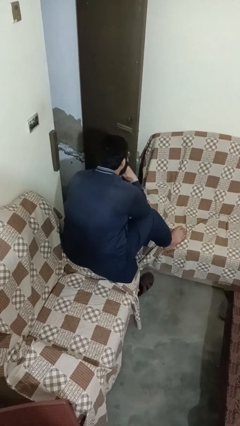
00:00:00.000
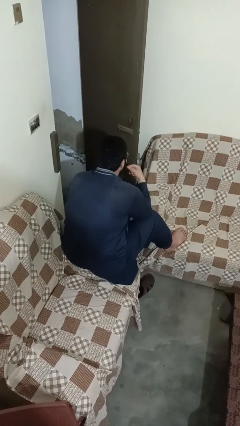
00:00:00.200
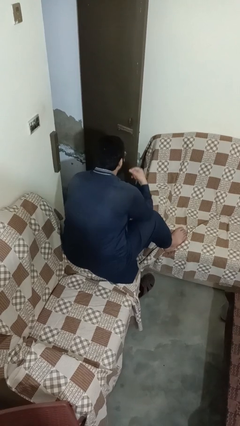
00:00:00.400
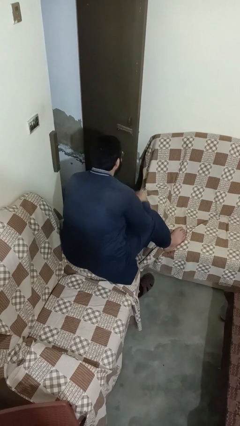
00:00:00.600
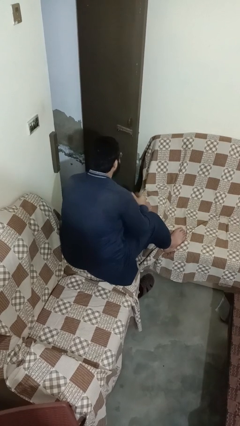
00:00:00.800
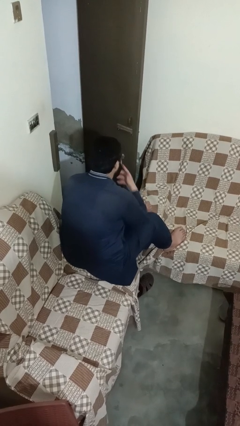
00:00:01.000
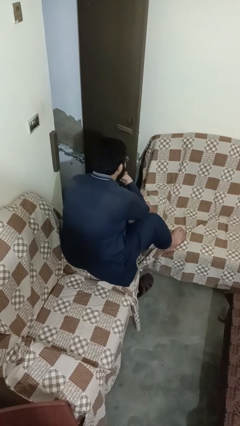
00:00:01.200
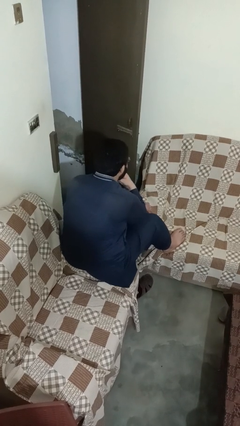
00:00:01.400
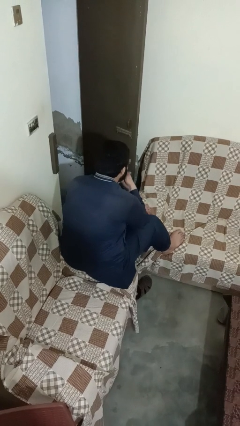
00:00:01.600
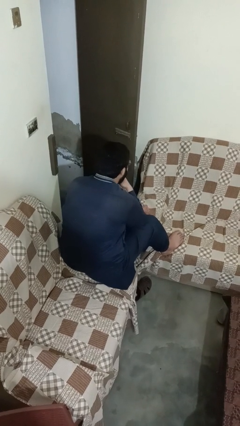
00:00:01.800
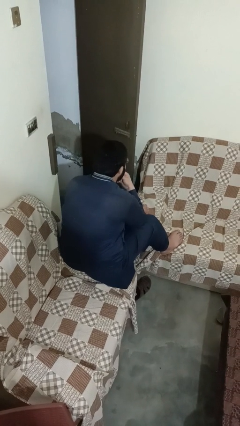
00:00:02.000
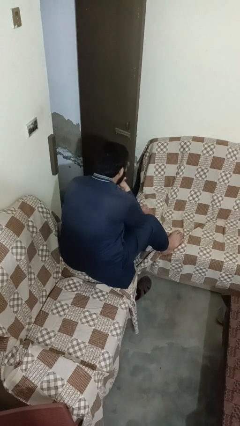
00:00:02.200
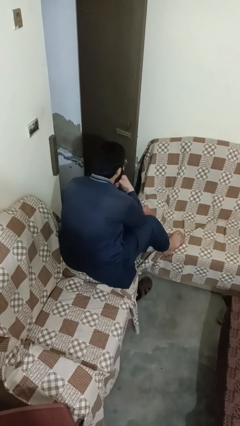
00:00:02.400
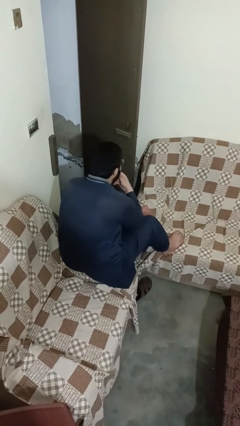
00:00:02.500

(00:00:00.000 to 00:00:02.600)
person strokes chin

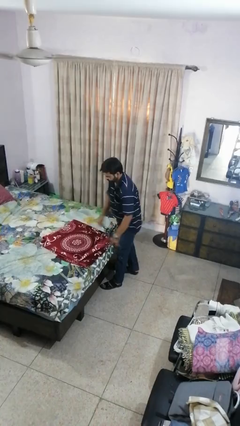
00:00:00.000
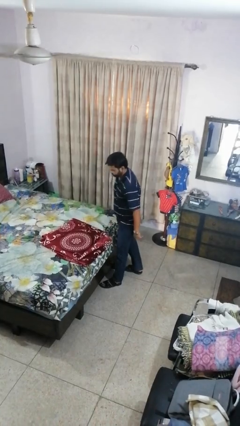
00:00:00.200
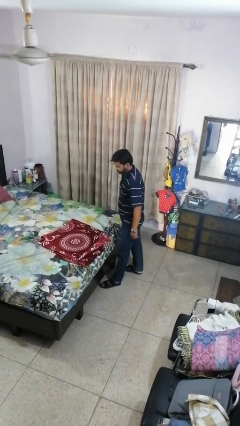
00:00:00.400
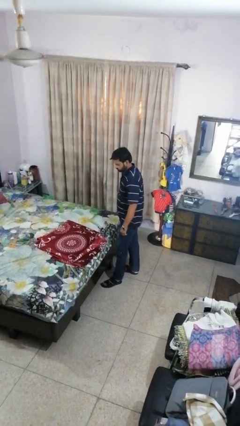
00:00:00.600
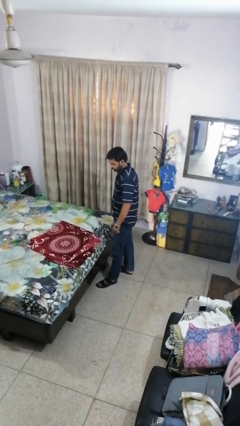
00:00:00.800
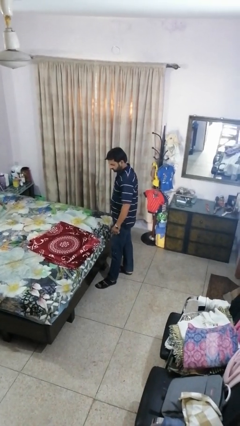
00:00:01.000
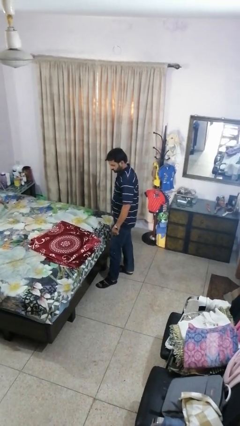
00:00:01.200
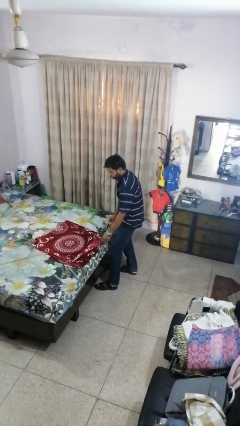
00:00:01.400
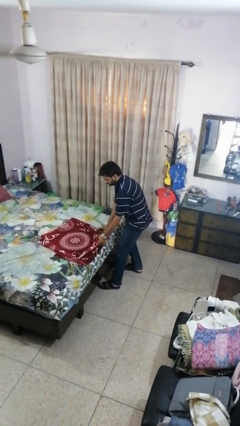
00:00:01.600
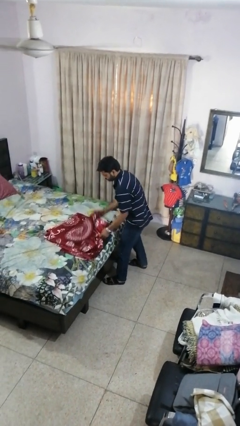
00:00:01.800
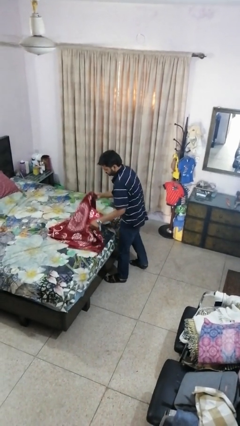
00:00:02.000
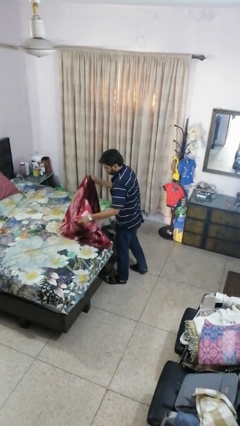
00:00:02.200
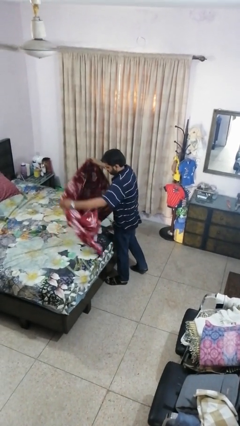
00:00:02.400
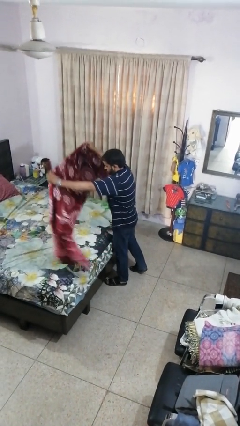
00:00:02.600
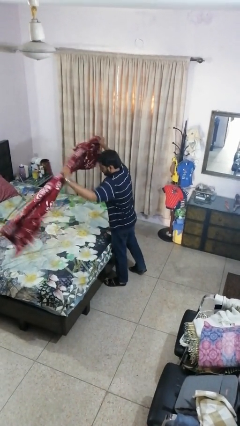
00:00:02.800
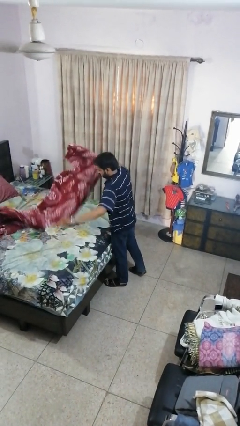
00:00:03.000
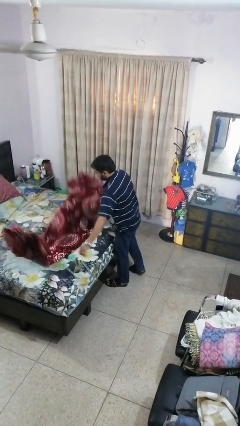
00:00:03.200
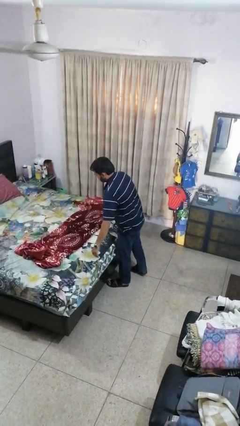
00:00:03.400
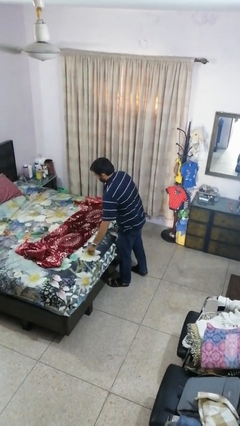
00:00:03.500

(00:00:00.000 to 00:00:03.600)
person crumples paper

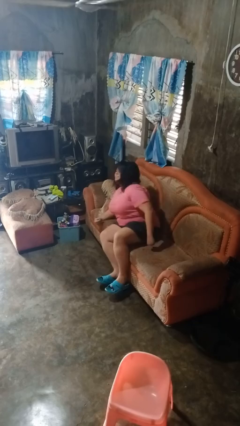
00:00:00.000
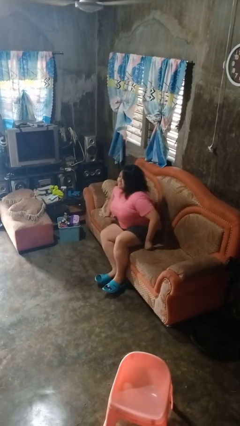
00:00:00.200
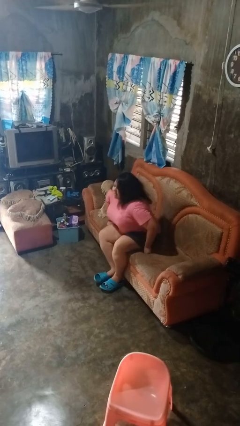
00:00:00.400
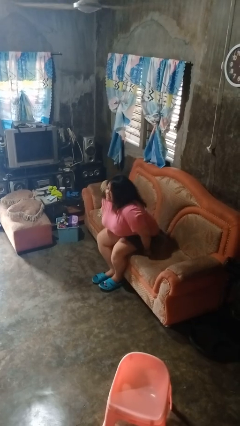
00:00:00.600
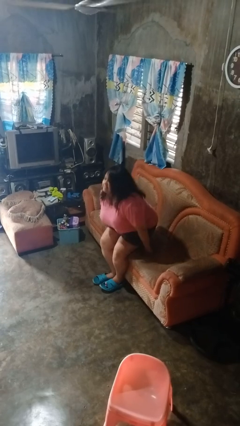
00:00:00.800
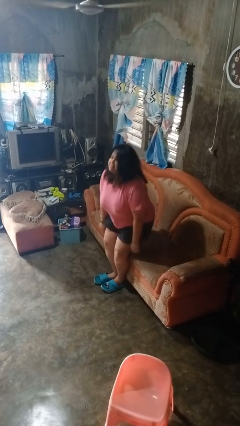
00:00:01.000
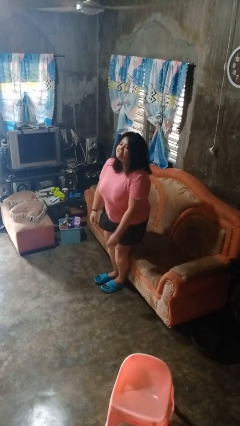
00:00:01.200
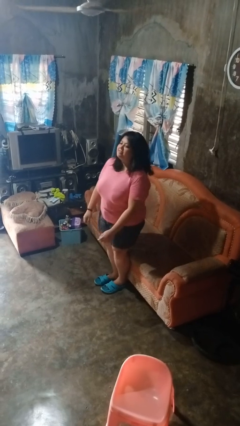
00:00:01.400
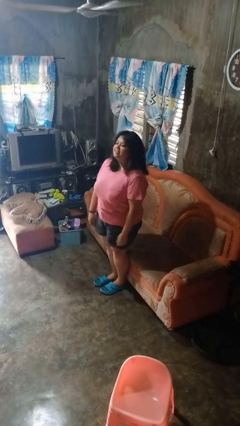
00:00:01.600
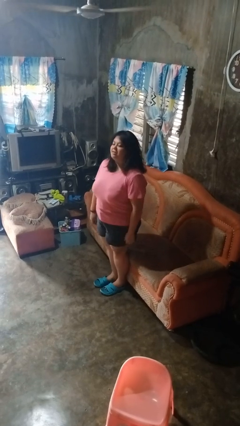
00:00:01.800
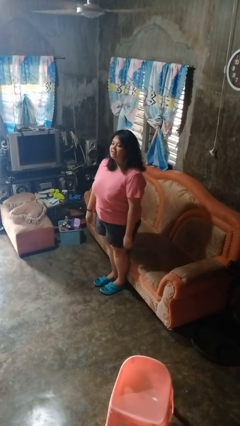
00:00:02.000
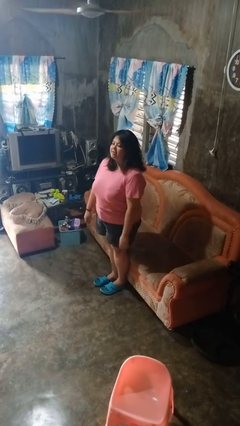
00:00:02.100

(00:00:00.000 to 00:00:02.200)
person stands up

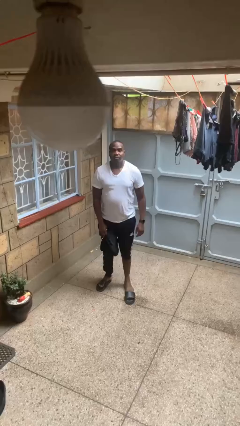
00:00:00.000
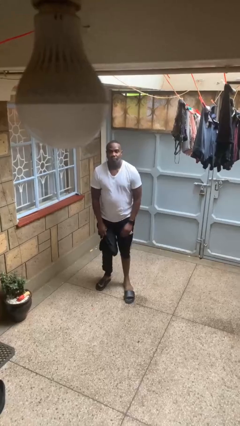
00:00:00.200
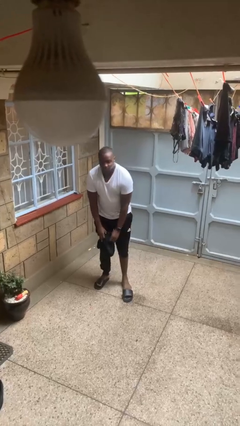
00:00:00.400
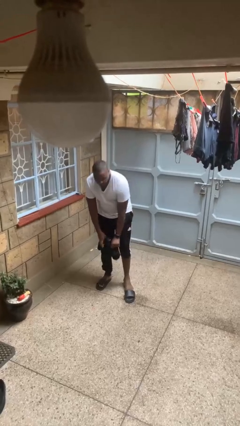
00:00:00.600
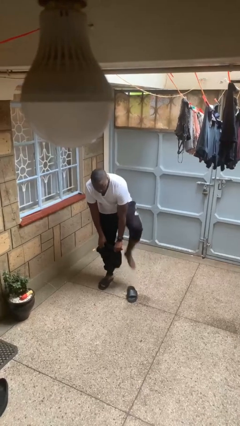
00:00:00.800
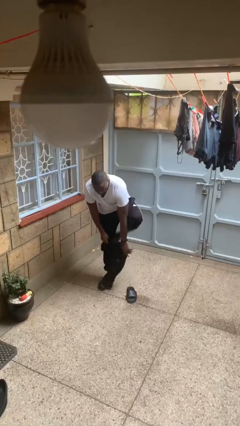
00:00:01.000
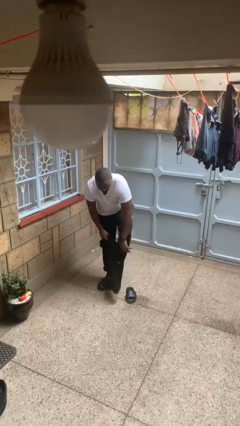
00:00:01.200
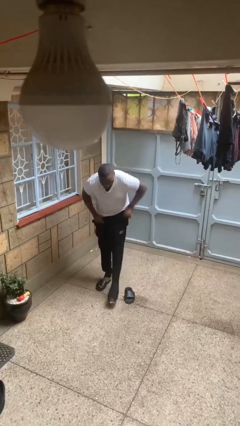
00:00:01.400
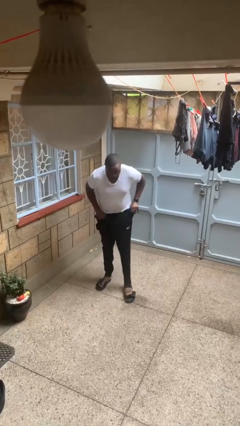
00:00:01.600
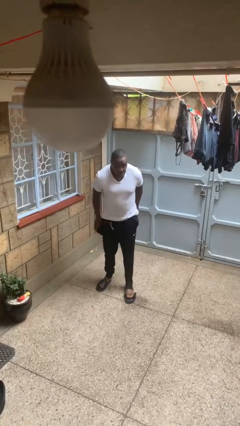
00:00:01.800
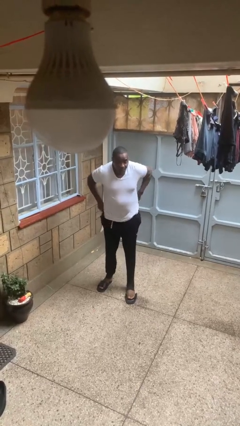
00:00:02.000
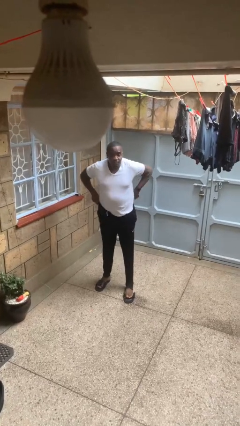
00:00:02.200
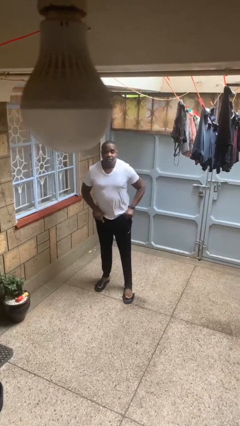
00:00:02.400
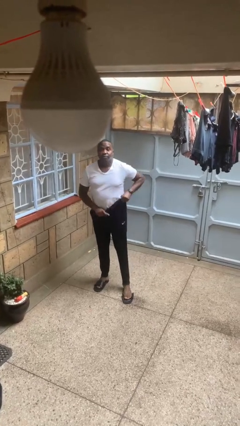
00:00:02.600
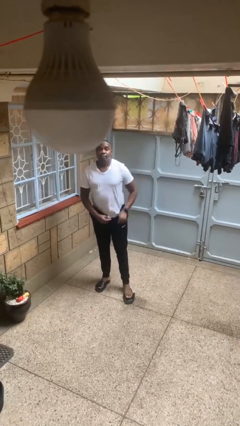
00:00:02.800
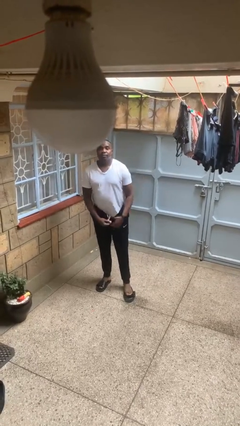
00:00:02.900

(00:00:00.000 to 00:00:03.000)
person puts on pants

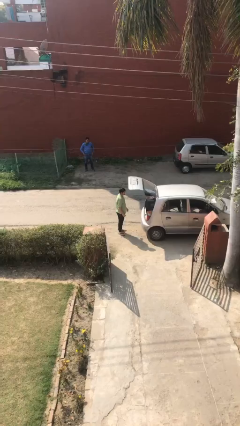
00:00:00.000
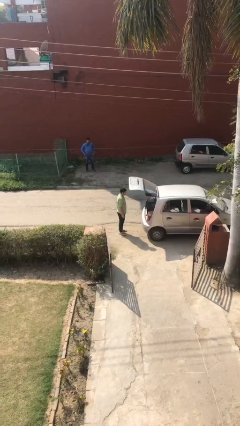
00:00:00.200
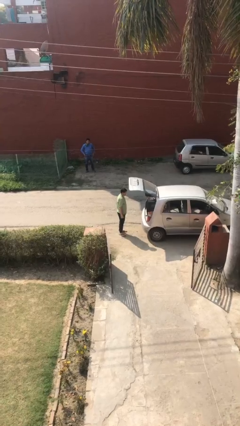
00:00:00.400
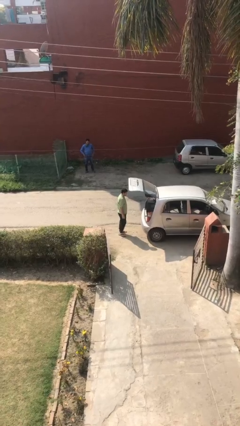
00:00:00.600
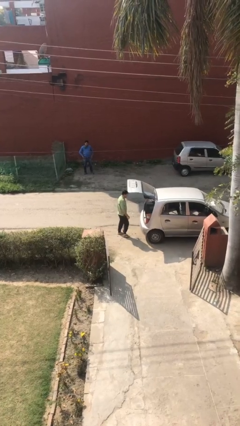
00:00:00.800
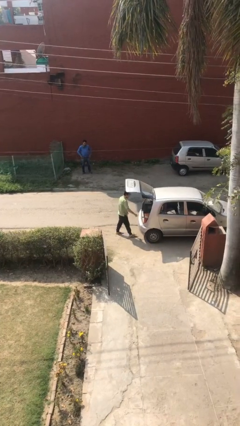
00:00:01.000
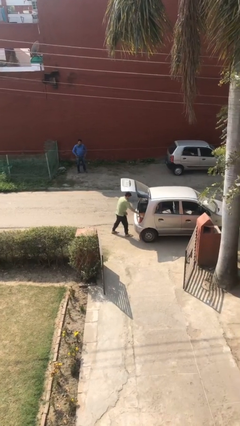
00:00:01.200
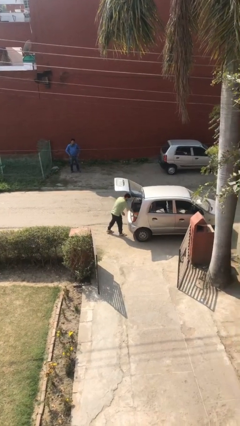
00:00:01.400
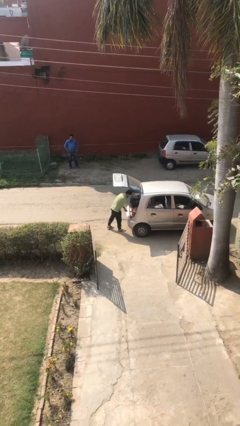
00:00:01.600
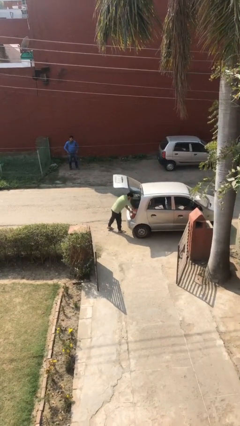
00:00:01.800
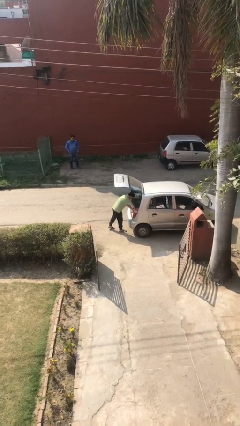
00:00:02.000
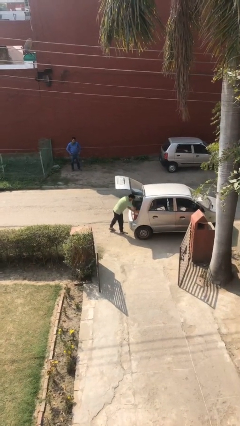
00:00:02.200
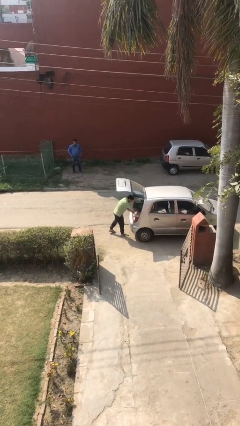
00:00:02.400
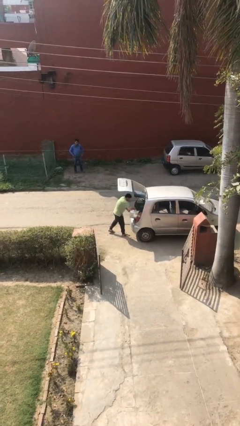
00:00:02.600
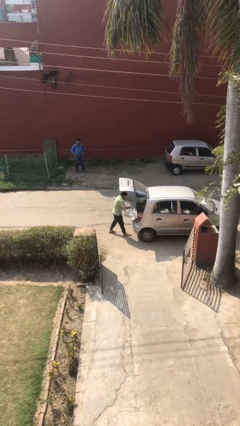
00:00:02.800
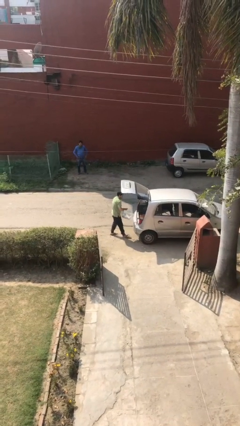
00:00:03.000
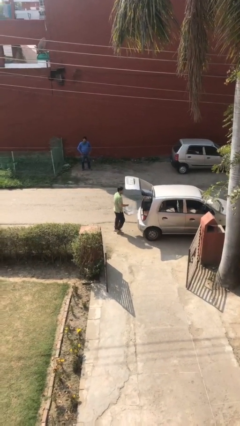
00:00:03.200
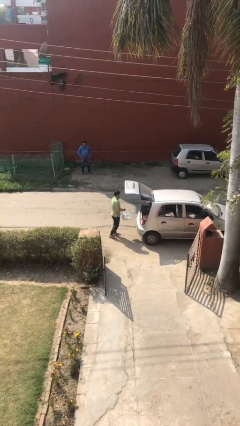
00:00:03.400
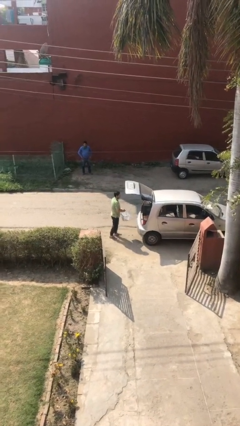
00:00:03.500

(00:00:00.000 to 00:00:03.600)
person unloads car

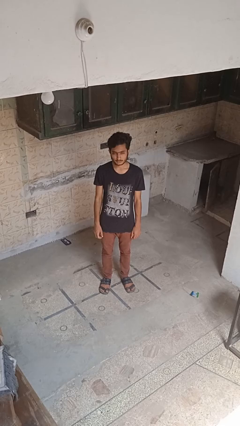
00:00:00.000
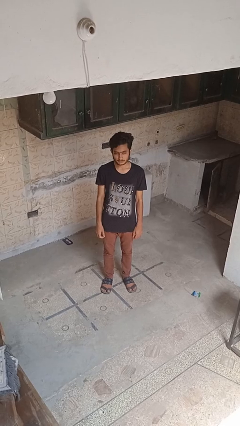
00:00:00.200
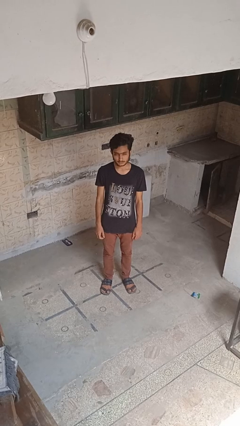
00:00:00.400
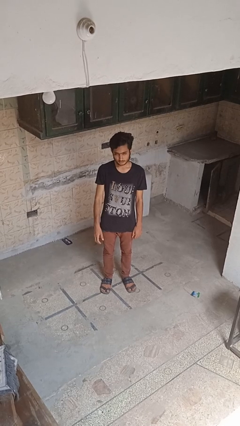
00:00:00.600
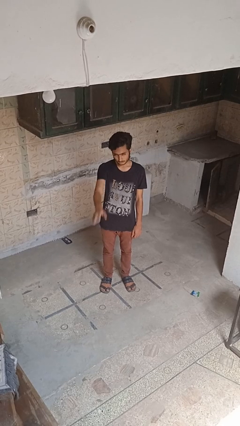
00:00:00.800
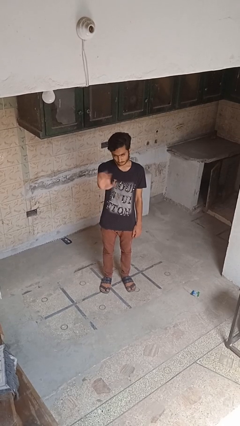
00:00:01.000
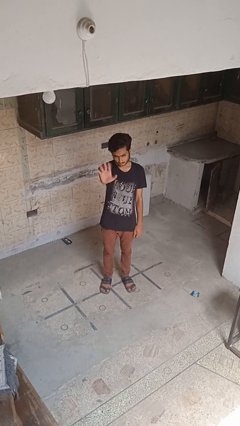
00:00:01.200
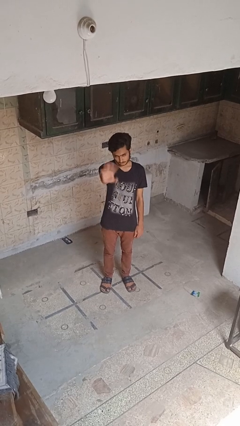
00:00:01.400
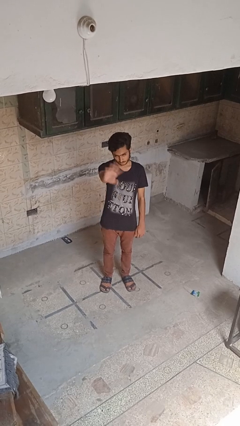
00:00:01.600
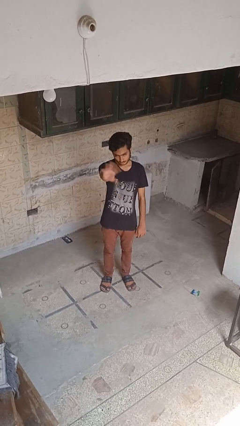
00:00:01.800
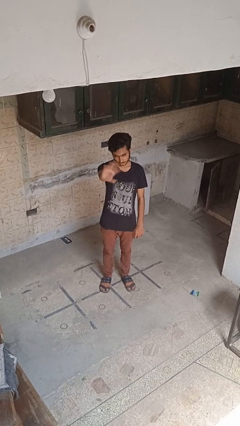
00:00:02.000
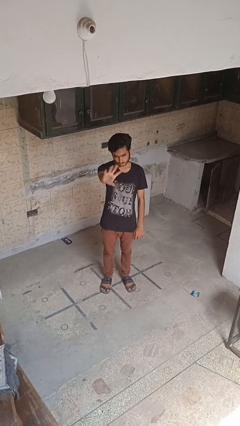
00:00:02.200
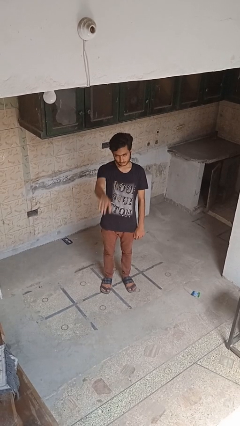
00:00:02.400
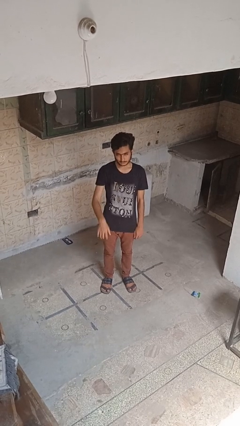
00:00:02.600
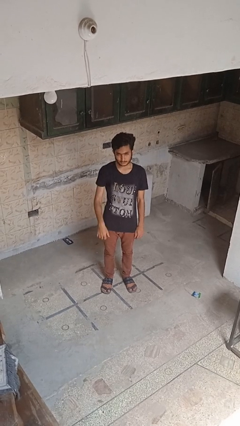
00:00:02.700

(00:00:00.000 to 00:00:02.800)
person waves at person
